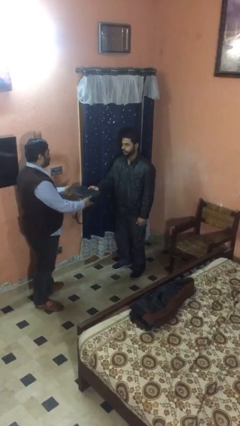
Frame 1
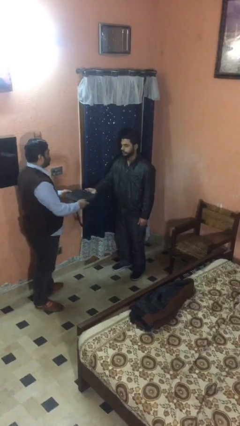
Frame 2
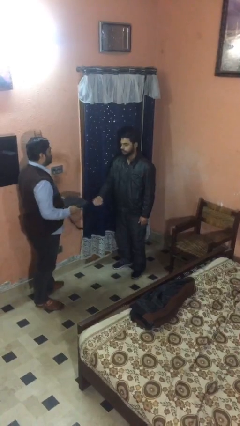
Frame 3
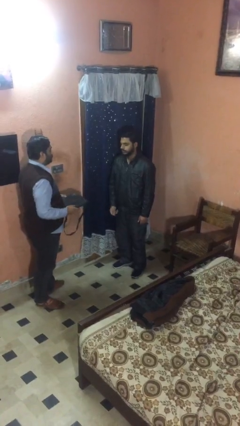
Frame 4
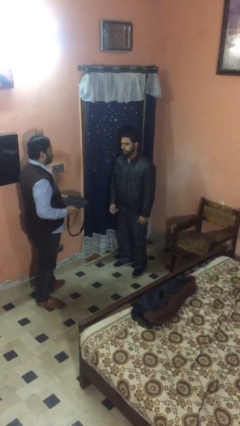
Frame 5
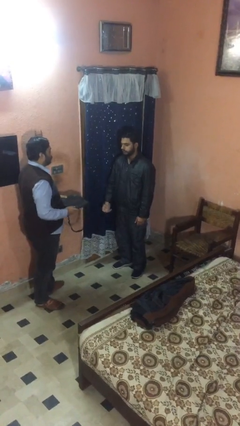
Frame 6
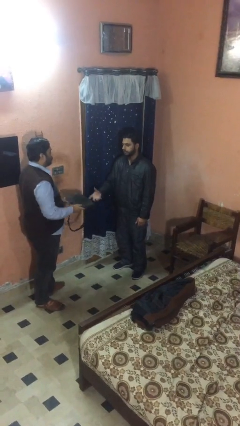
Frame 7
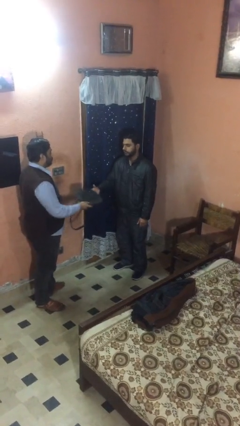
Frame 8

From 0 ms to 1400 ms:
person transfers object to person

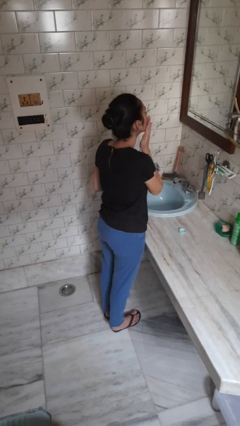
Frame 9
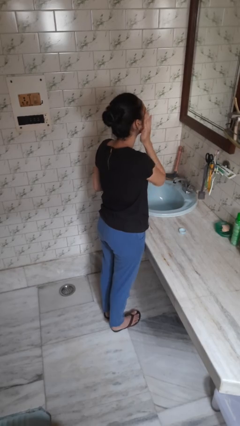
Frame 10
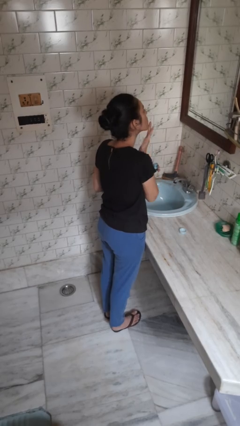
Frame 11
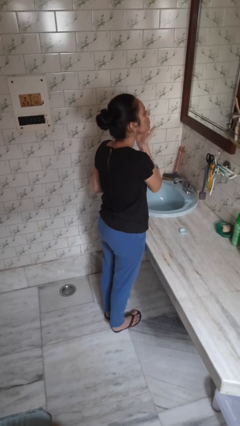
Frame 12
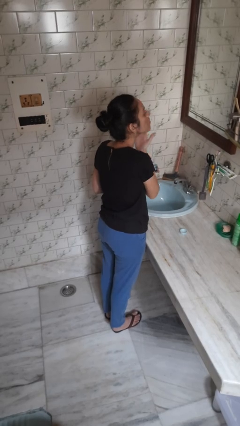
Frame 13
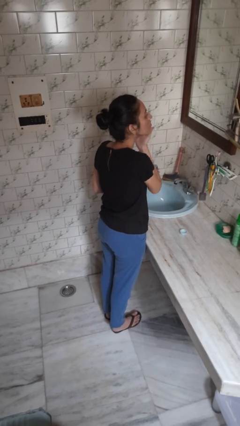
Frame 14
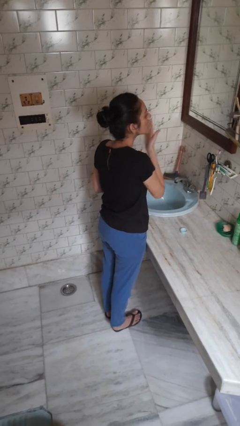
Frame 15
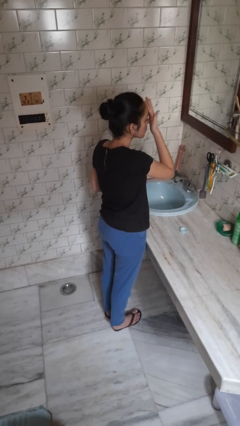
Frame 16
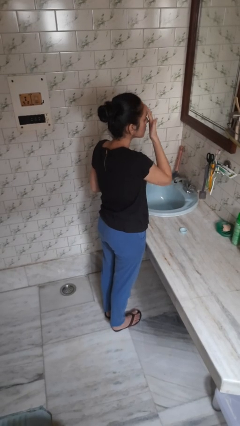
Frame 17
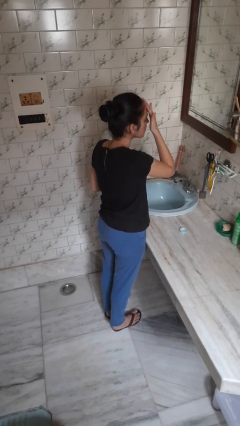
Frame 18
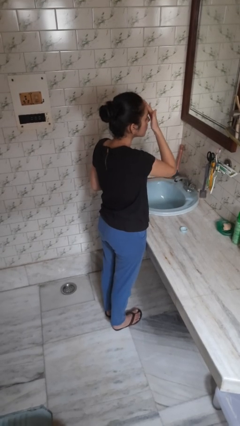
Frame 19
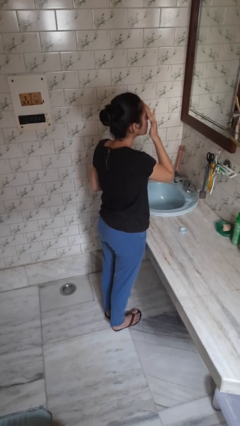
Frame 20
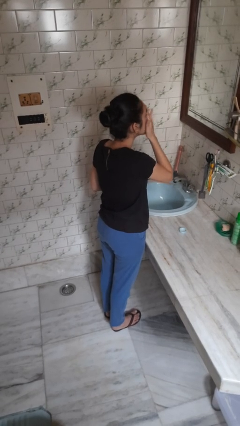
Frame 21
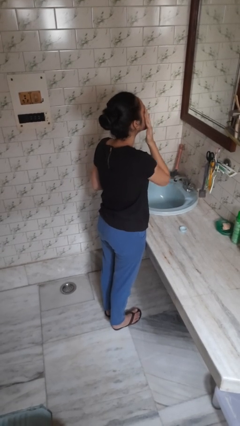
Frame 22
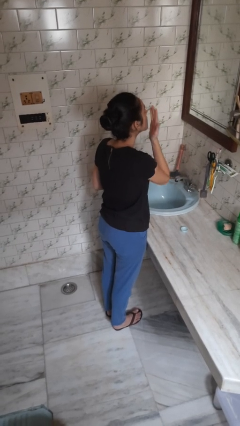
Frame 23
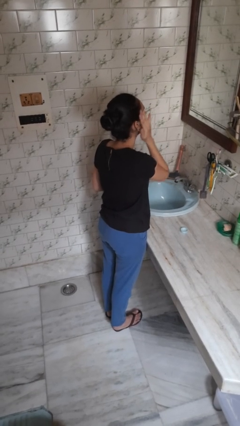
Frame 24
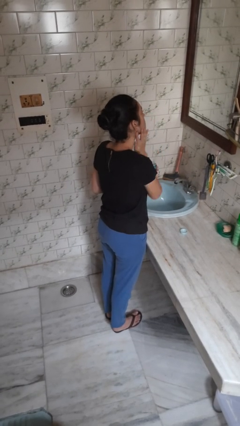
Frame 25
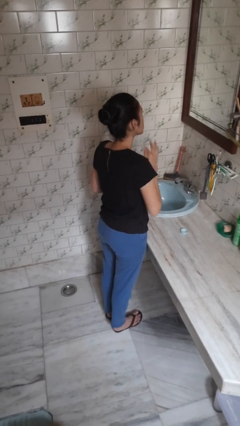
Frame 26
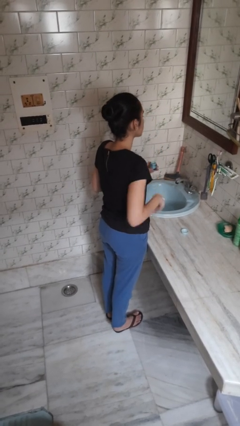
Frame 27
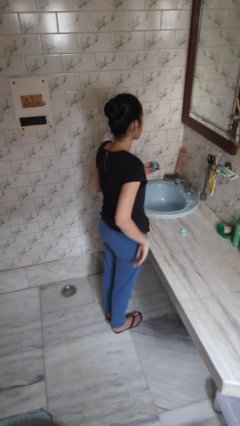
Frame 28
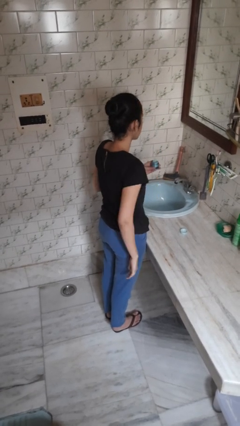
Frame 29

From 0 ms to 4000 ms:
person applies facial moisturizer

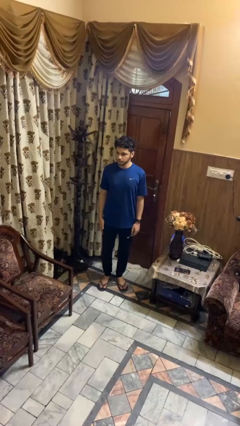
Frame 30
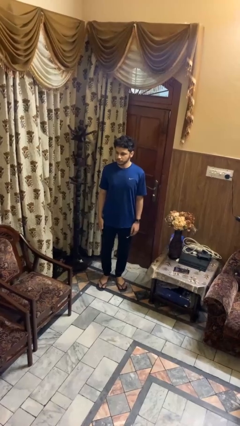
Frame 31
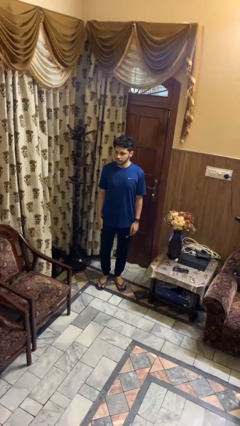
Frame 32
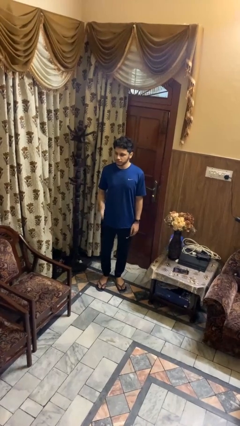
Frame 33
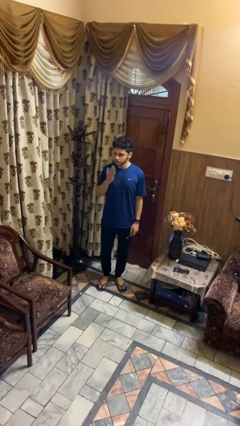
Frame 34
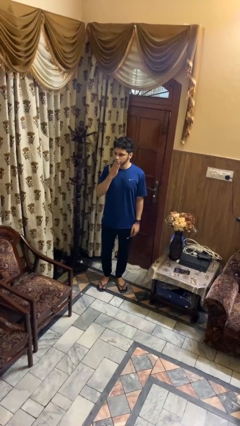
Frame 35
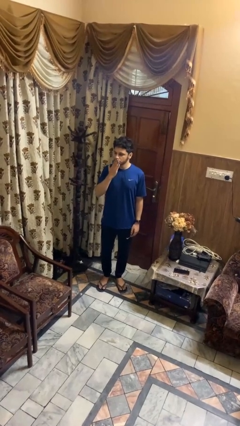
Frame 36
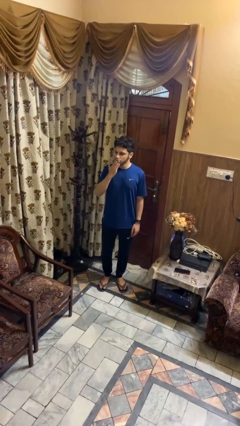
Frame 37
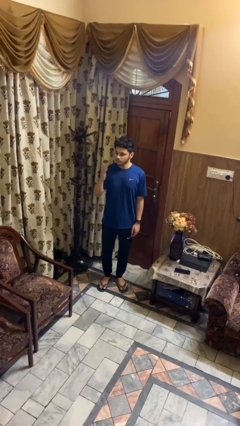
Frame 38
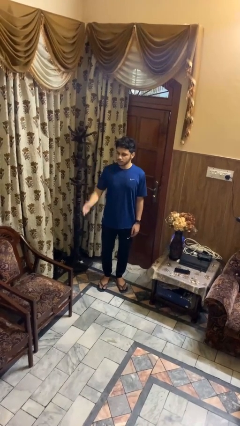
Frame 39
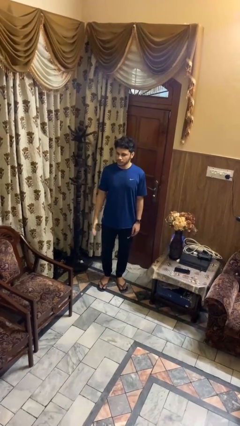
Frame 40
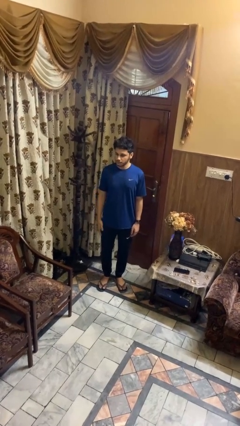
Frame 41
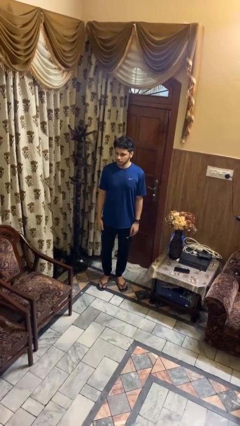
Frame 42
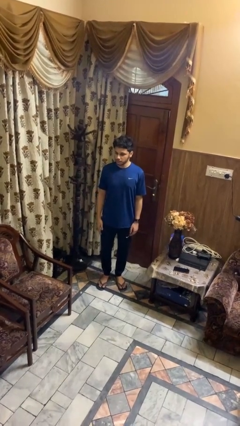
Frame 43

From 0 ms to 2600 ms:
person gestures blow kiss

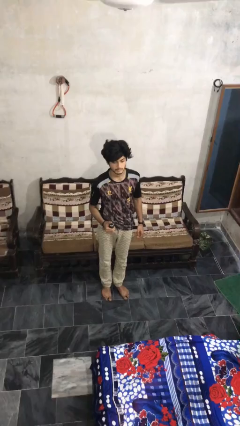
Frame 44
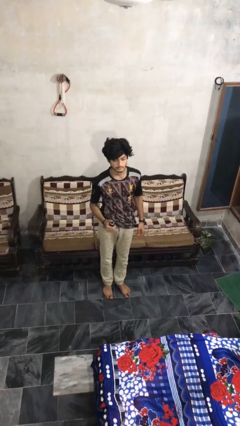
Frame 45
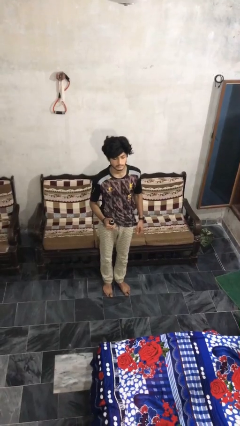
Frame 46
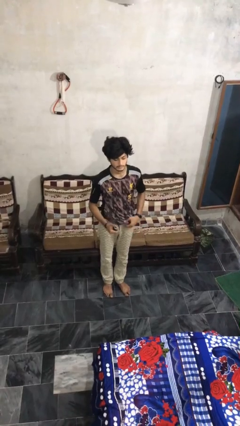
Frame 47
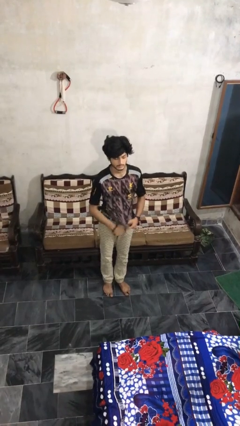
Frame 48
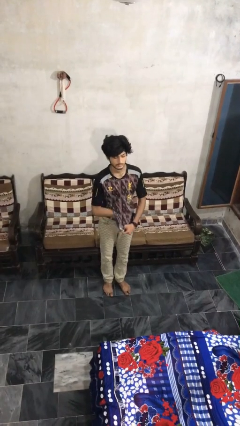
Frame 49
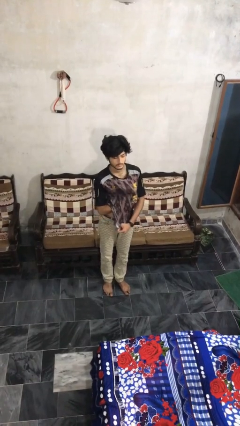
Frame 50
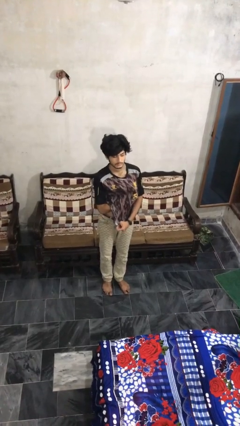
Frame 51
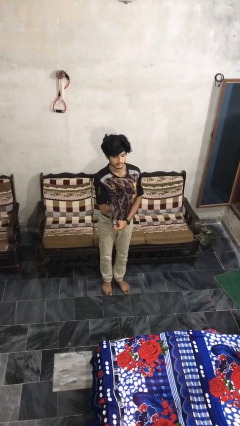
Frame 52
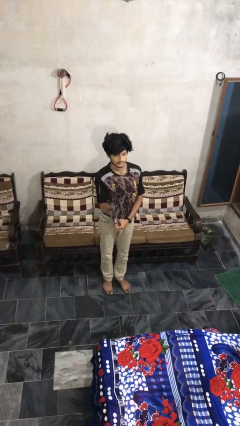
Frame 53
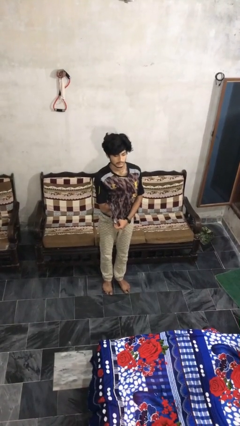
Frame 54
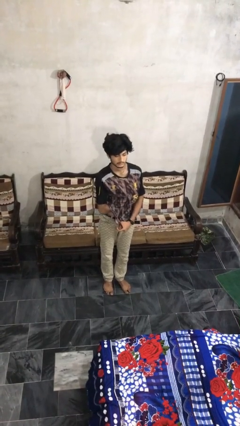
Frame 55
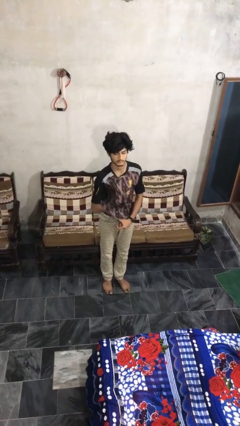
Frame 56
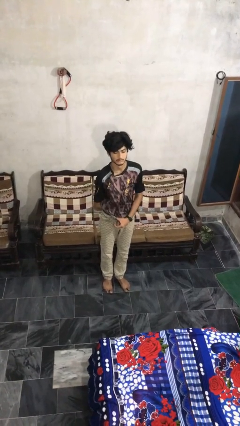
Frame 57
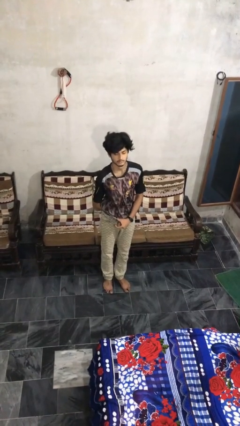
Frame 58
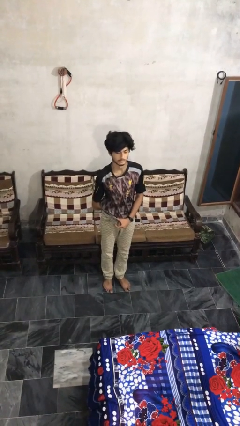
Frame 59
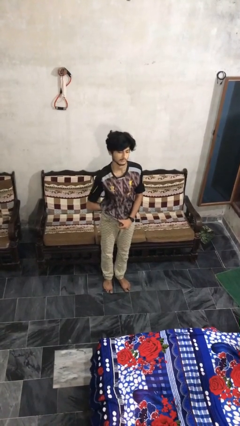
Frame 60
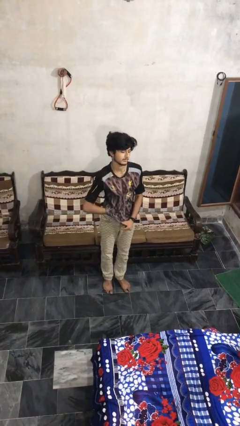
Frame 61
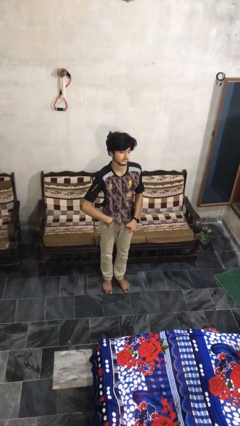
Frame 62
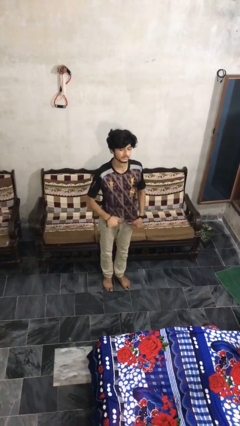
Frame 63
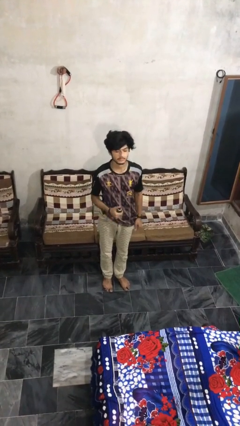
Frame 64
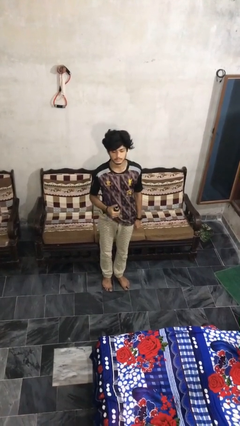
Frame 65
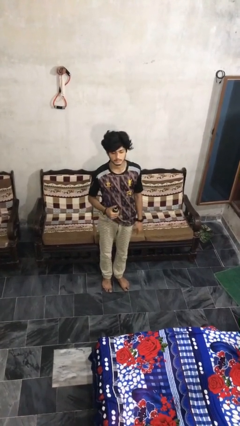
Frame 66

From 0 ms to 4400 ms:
person applies deodorant

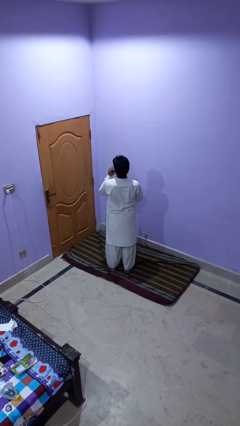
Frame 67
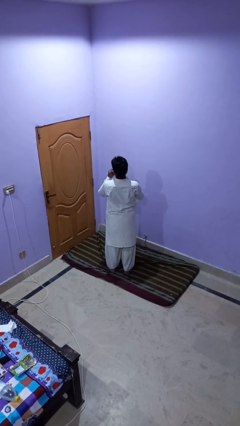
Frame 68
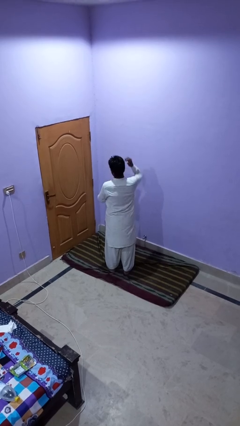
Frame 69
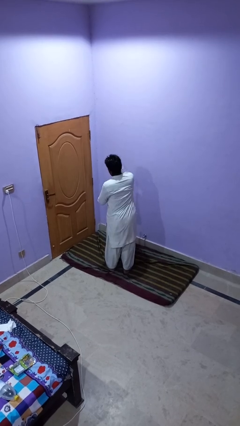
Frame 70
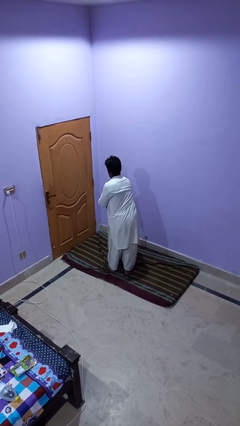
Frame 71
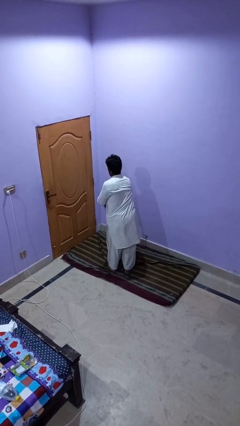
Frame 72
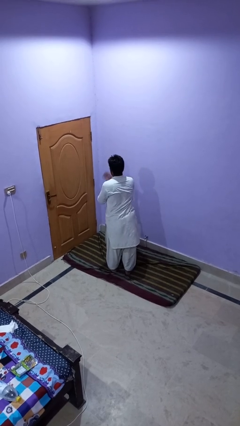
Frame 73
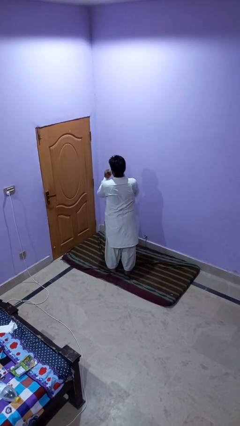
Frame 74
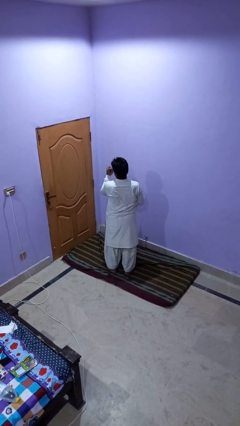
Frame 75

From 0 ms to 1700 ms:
person karate chop

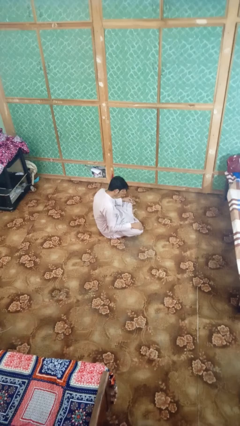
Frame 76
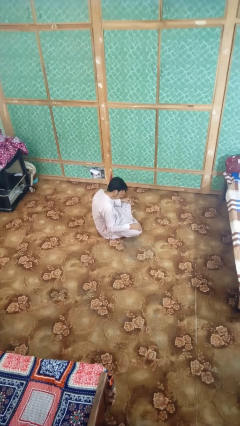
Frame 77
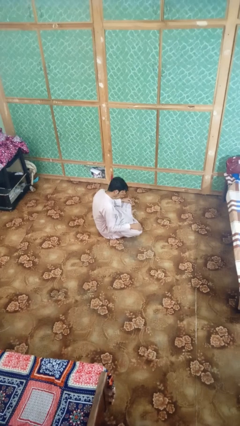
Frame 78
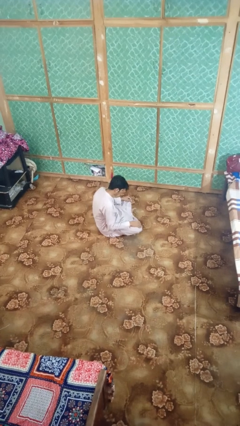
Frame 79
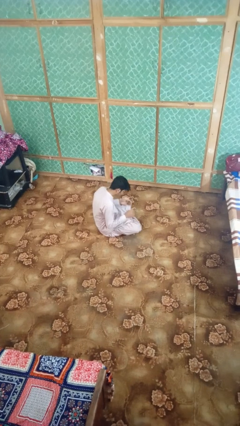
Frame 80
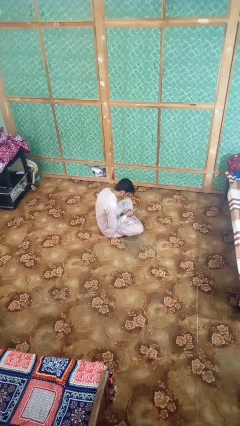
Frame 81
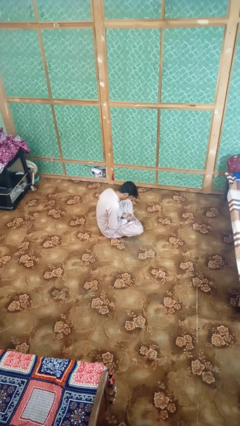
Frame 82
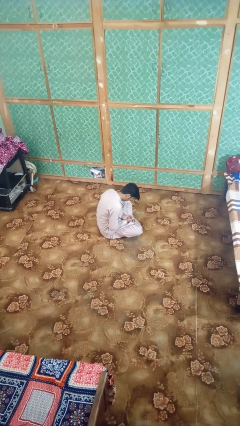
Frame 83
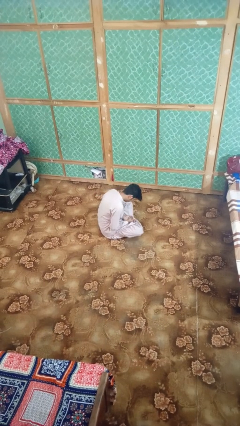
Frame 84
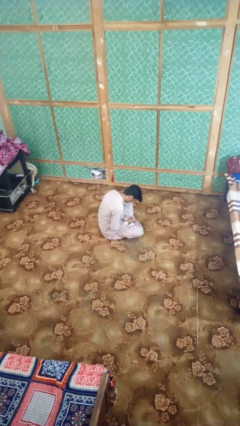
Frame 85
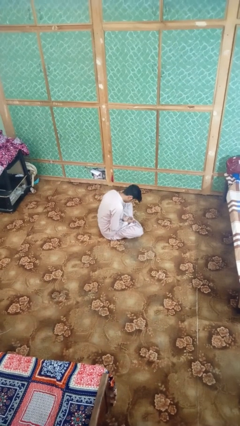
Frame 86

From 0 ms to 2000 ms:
person looks at hands in lap

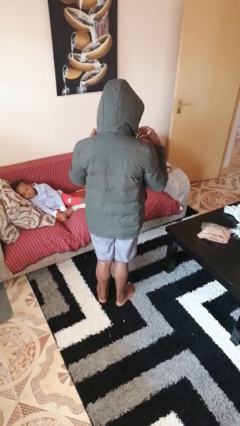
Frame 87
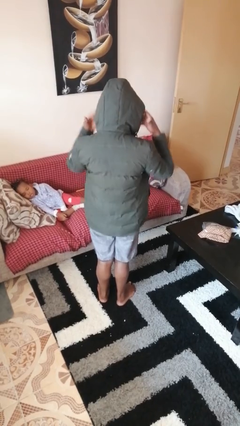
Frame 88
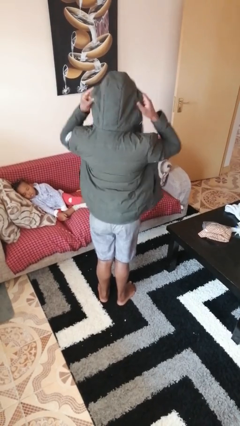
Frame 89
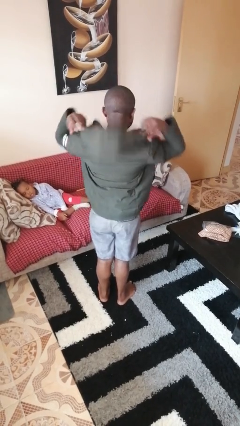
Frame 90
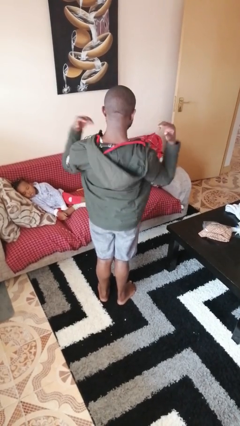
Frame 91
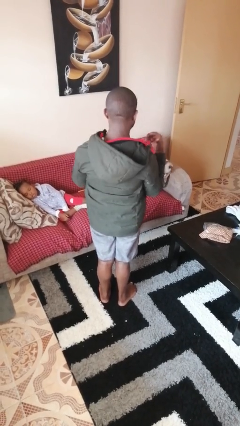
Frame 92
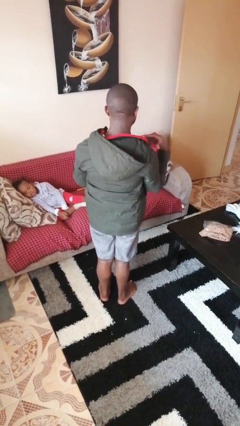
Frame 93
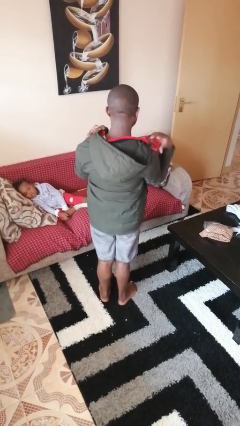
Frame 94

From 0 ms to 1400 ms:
person takes off hoodie
